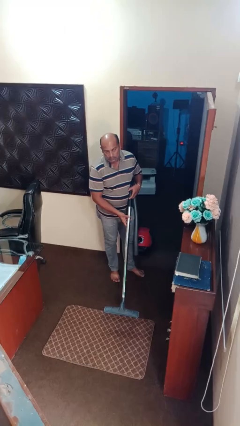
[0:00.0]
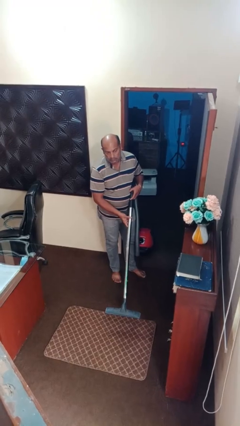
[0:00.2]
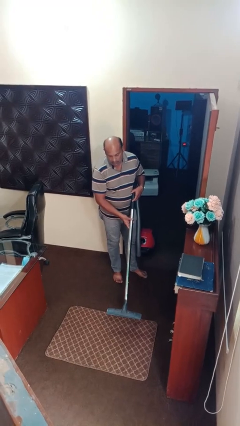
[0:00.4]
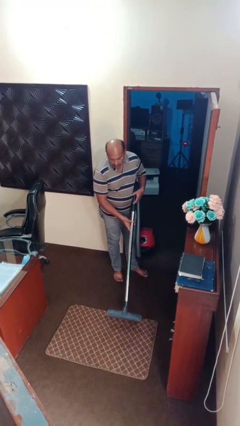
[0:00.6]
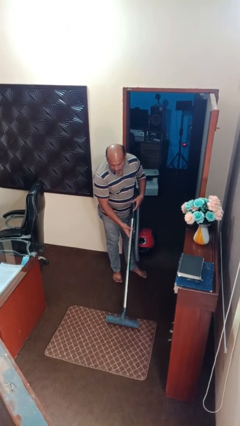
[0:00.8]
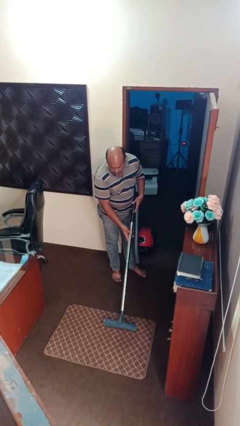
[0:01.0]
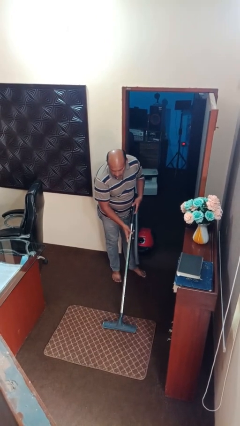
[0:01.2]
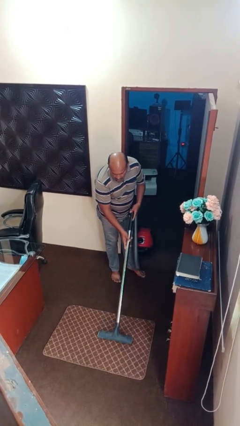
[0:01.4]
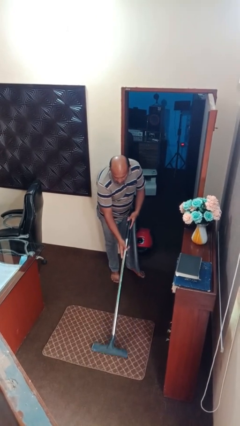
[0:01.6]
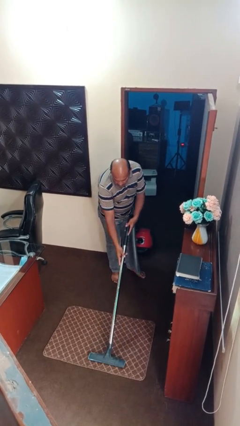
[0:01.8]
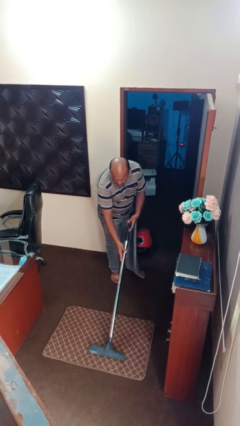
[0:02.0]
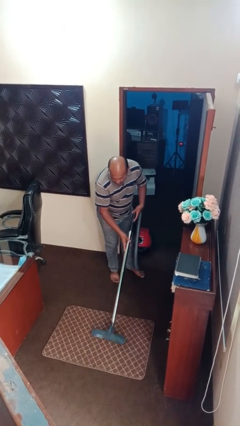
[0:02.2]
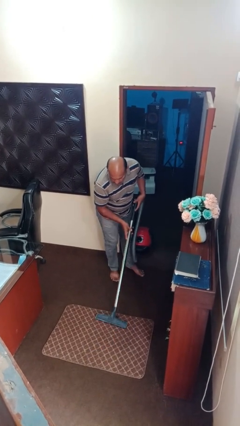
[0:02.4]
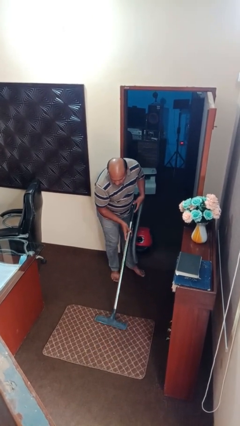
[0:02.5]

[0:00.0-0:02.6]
person vacuums carpet

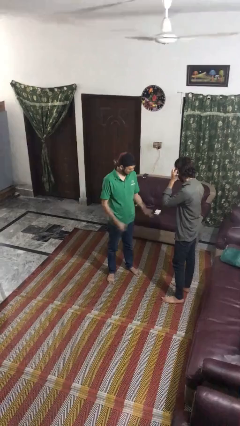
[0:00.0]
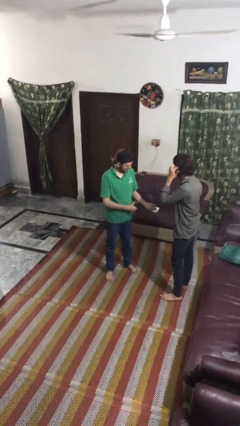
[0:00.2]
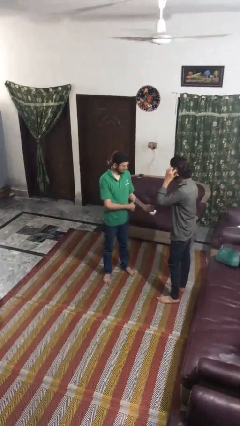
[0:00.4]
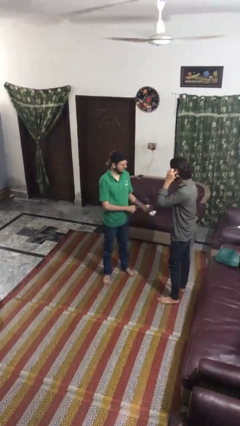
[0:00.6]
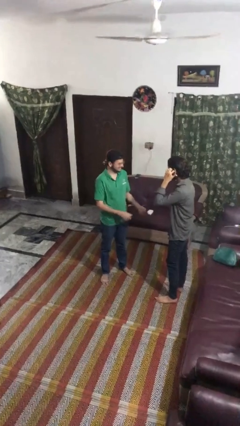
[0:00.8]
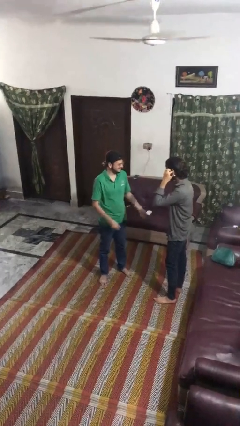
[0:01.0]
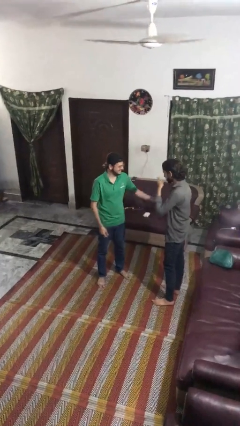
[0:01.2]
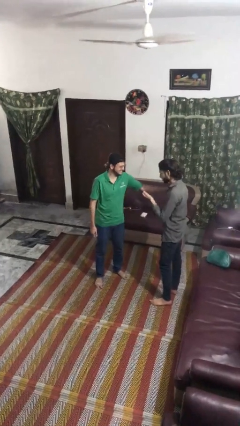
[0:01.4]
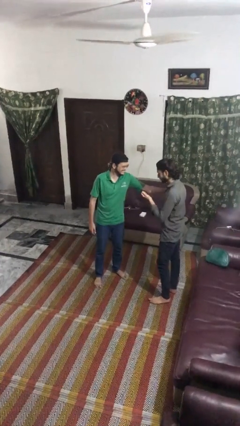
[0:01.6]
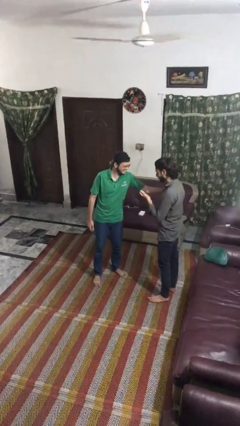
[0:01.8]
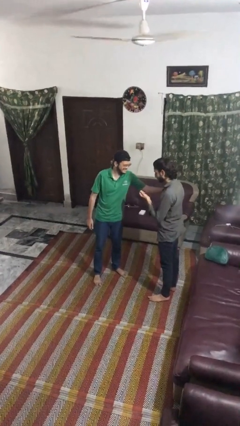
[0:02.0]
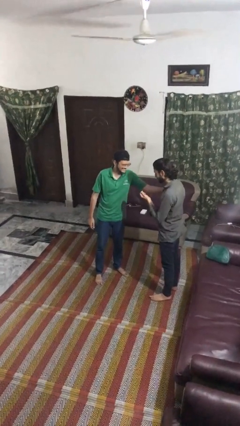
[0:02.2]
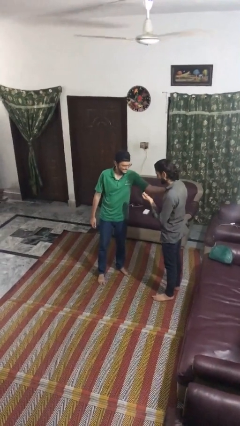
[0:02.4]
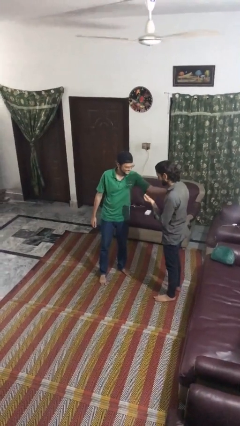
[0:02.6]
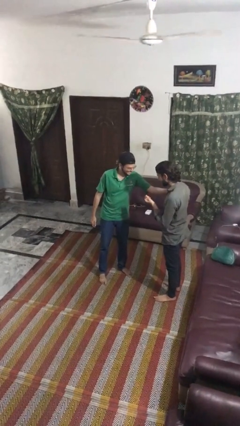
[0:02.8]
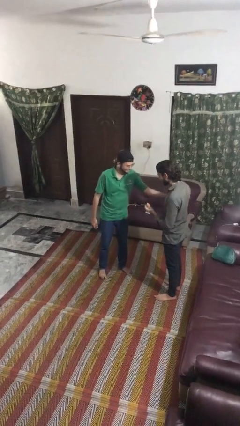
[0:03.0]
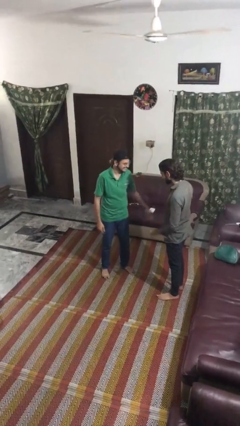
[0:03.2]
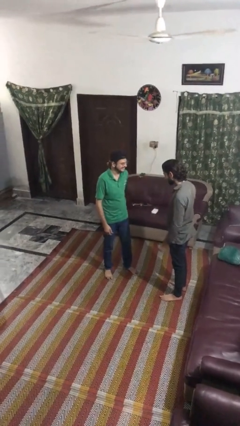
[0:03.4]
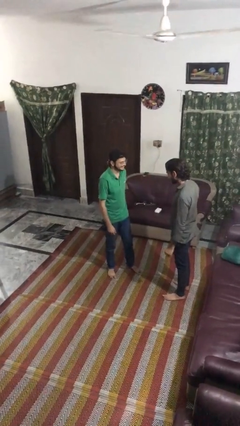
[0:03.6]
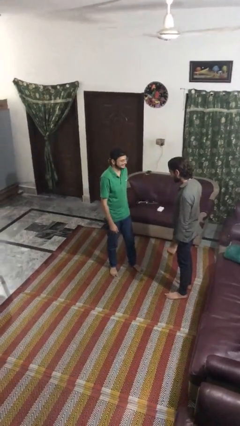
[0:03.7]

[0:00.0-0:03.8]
person grabs person by hair

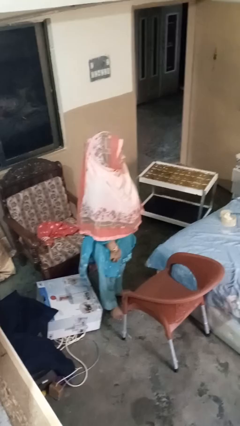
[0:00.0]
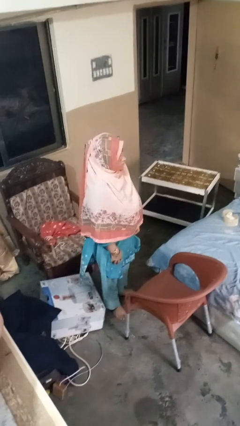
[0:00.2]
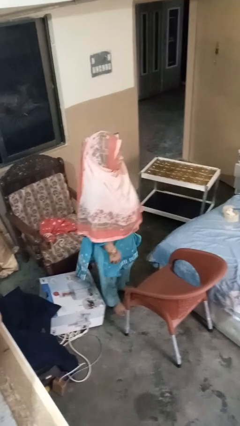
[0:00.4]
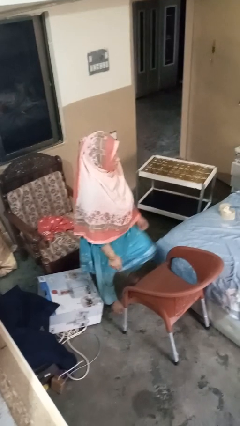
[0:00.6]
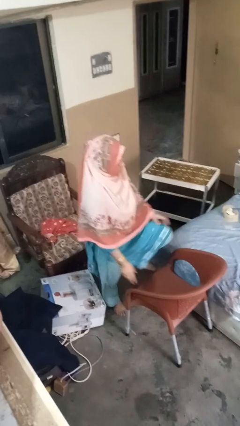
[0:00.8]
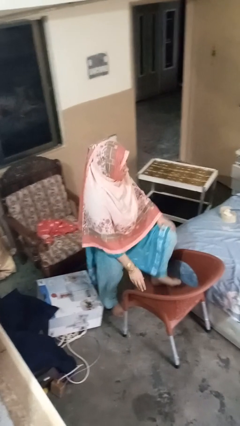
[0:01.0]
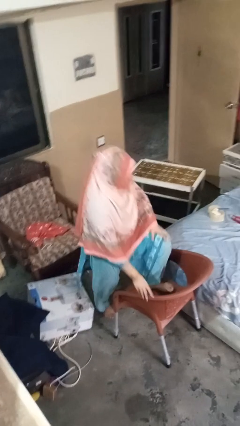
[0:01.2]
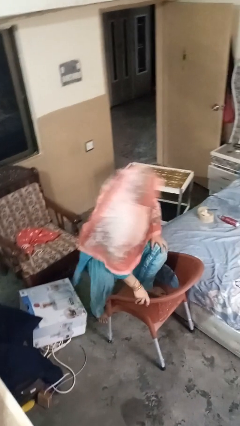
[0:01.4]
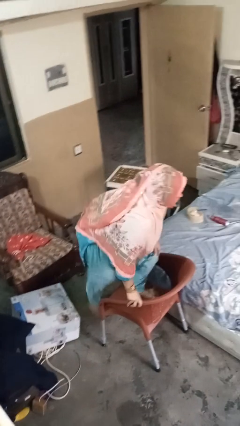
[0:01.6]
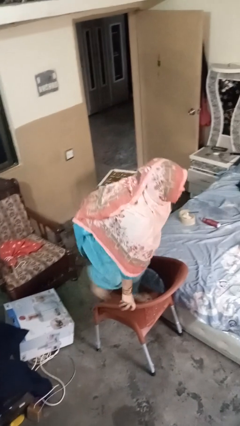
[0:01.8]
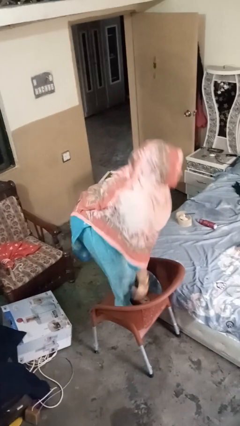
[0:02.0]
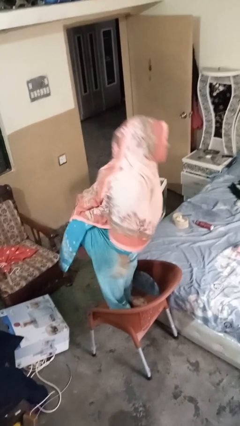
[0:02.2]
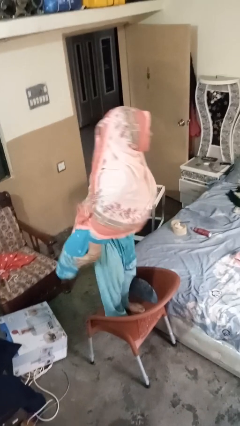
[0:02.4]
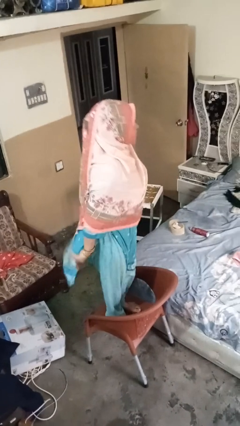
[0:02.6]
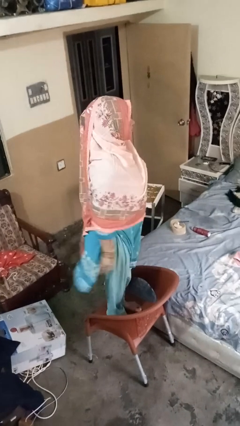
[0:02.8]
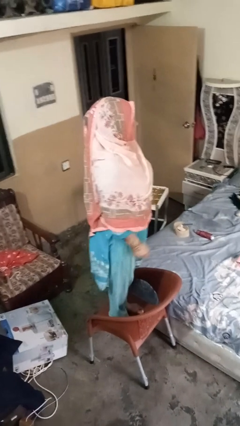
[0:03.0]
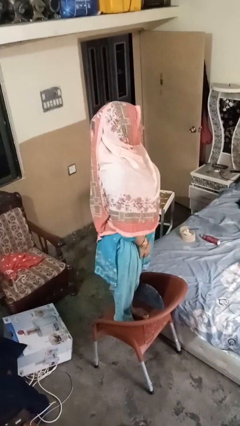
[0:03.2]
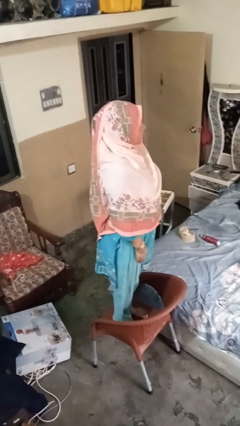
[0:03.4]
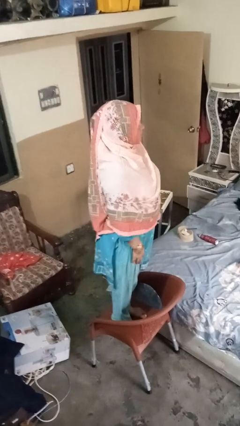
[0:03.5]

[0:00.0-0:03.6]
person climbs on chair

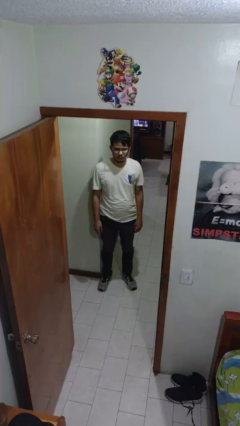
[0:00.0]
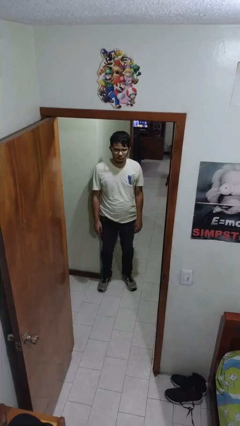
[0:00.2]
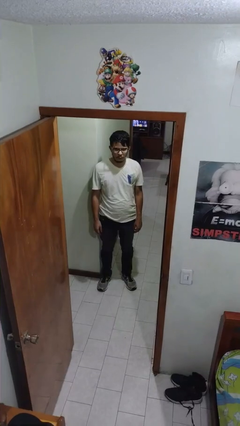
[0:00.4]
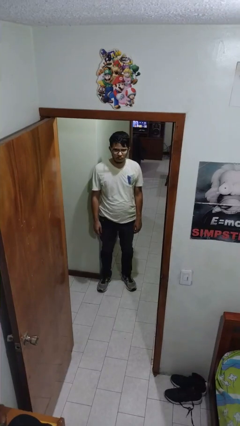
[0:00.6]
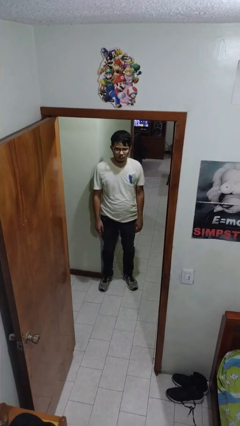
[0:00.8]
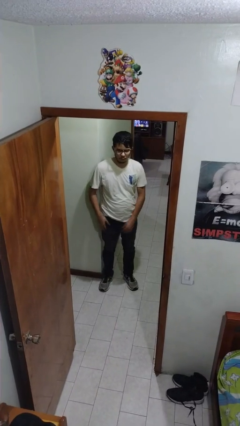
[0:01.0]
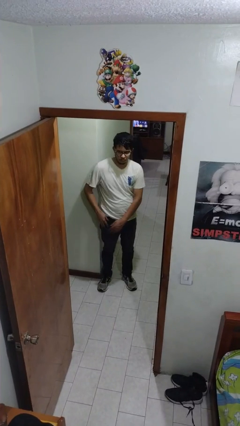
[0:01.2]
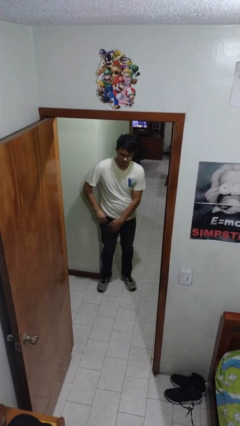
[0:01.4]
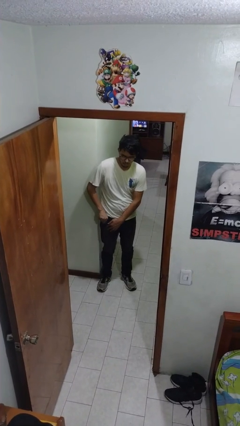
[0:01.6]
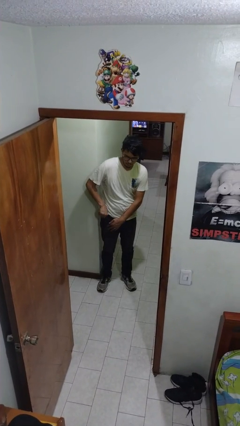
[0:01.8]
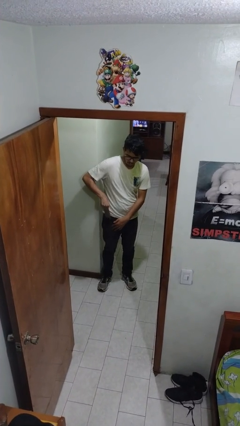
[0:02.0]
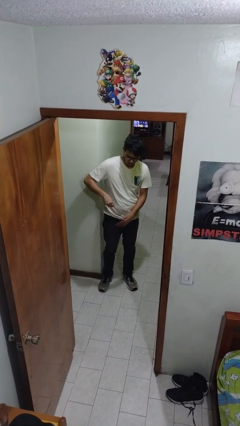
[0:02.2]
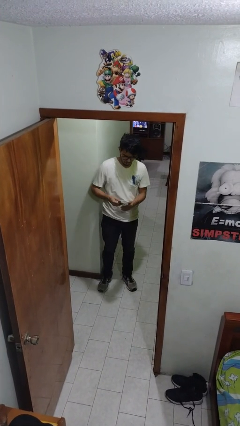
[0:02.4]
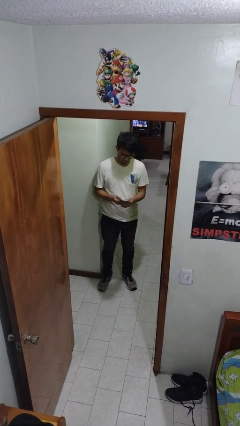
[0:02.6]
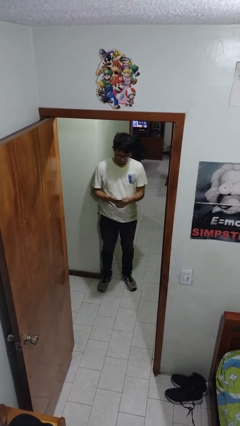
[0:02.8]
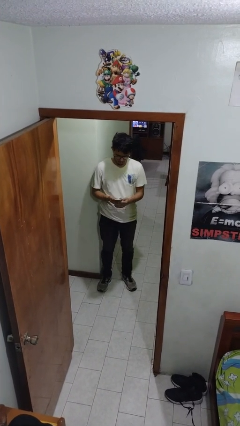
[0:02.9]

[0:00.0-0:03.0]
person takes phone from pocket

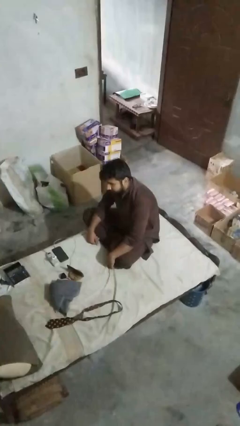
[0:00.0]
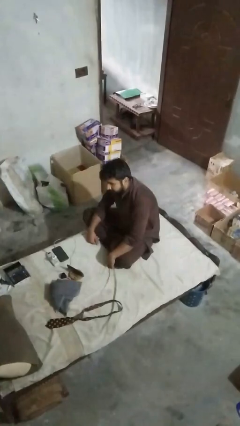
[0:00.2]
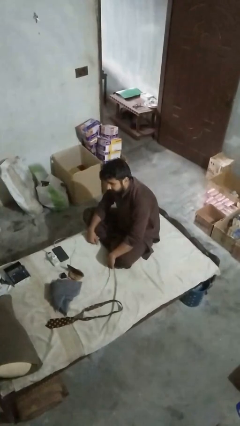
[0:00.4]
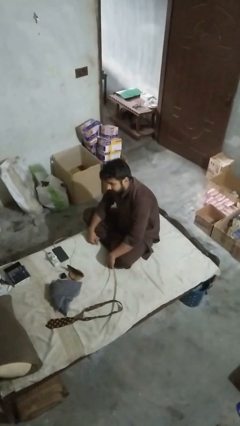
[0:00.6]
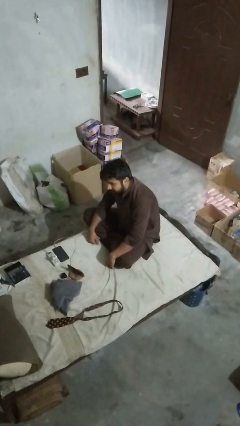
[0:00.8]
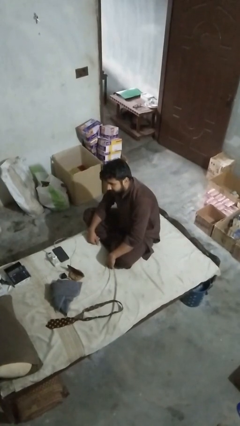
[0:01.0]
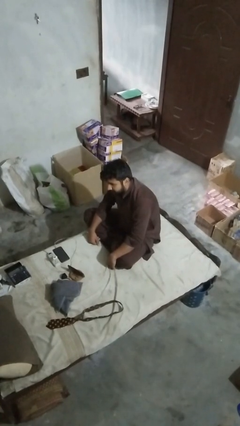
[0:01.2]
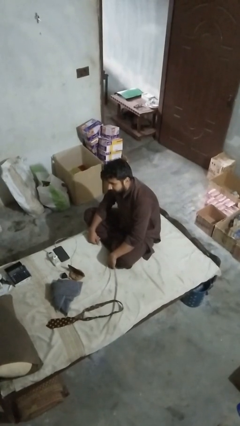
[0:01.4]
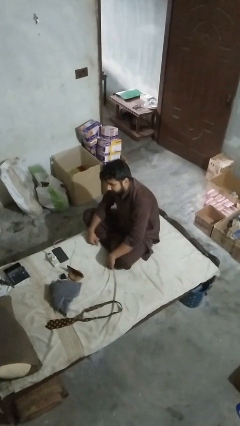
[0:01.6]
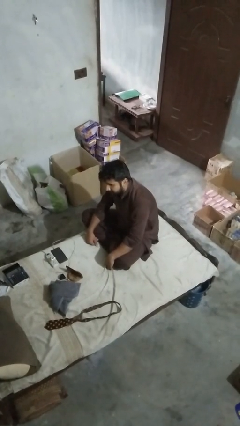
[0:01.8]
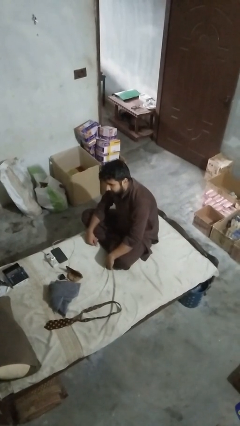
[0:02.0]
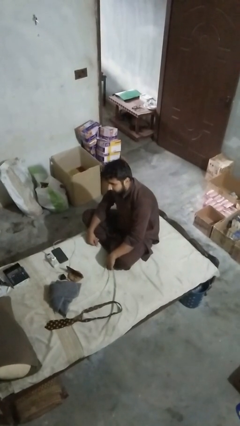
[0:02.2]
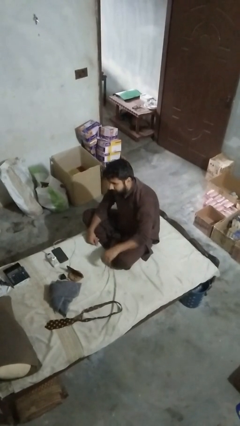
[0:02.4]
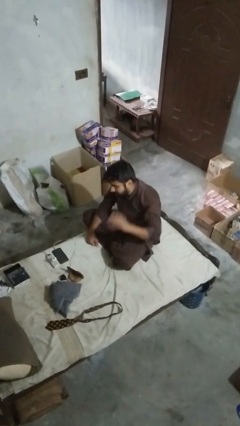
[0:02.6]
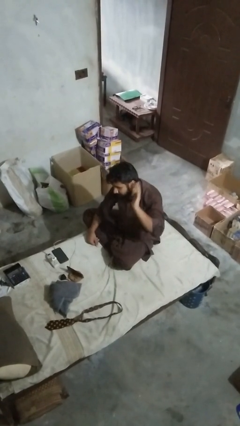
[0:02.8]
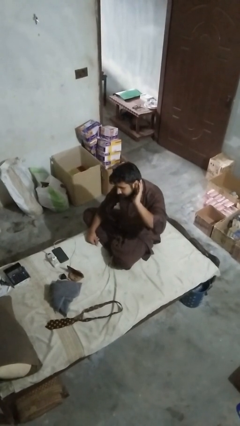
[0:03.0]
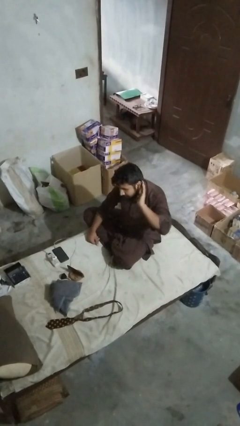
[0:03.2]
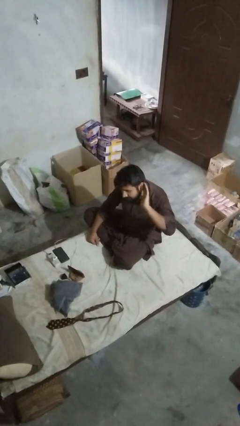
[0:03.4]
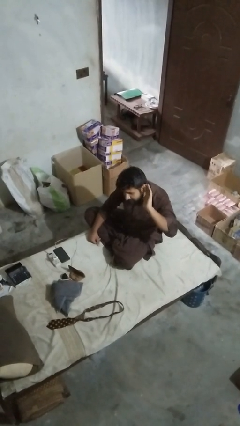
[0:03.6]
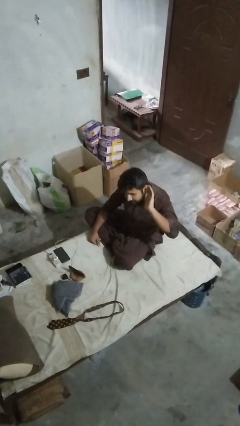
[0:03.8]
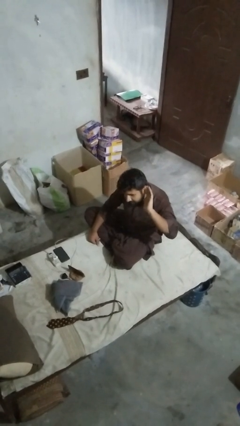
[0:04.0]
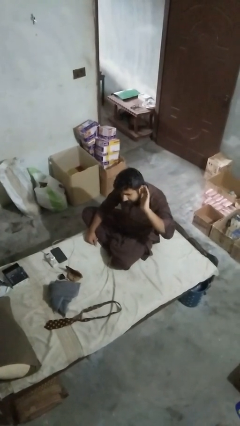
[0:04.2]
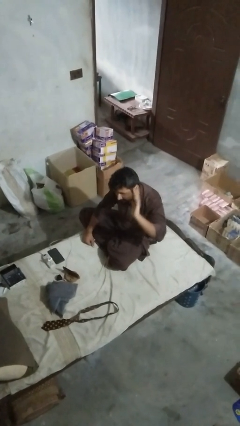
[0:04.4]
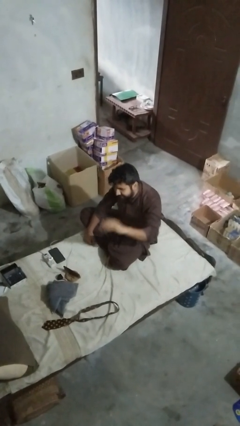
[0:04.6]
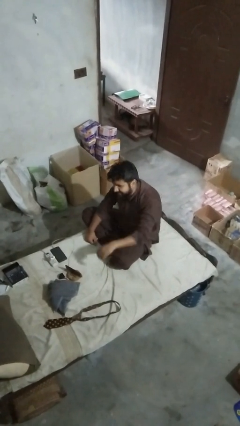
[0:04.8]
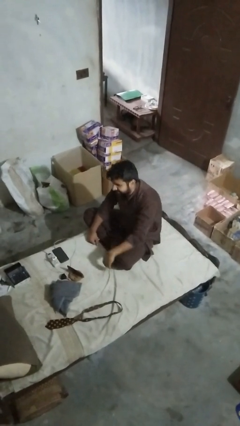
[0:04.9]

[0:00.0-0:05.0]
person gestures listen closely
